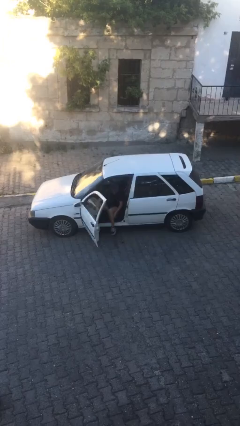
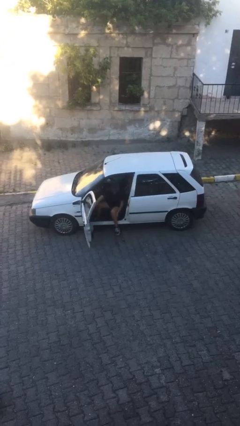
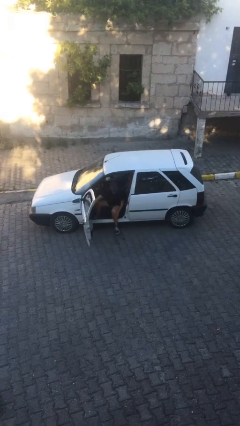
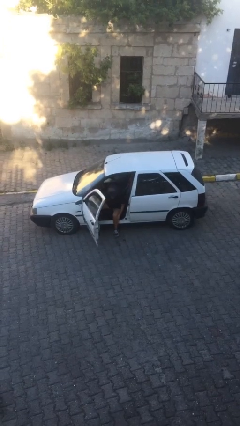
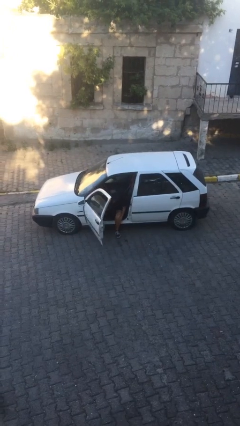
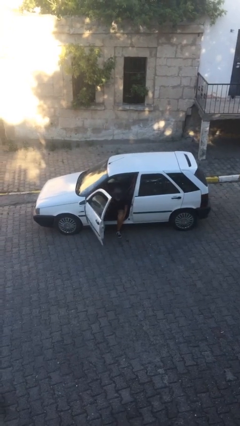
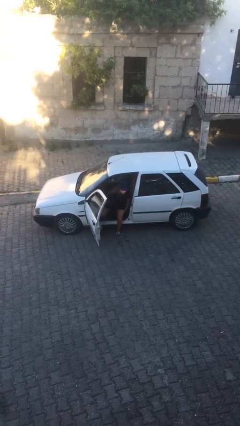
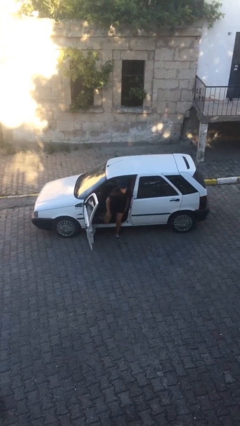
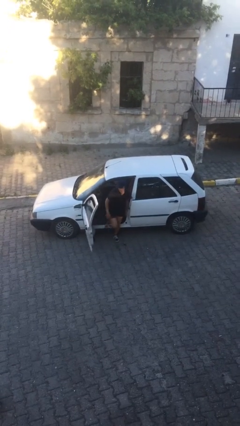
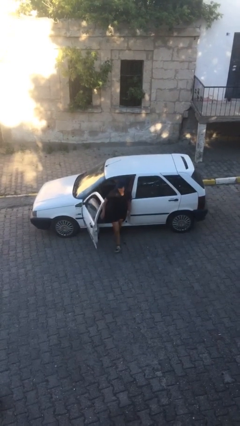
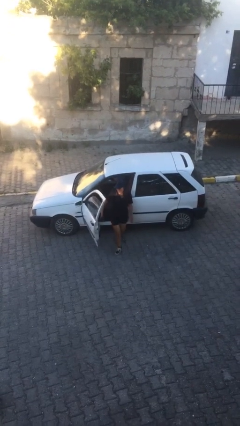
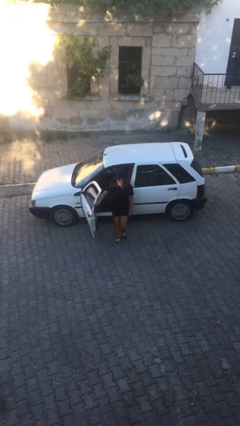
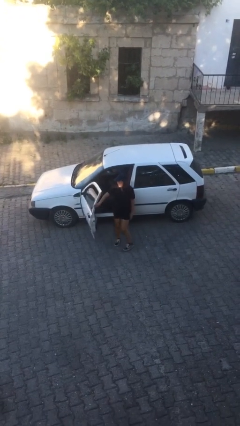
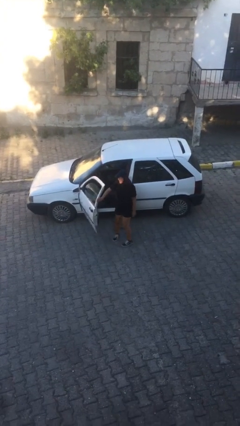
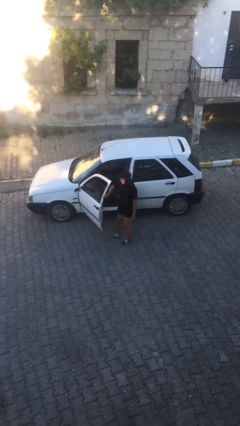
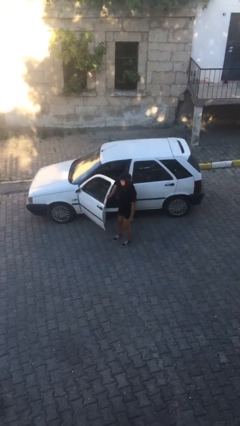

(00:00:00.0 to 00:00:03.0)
person exits car

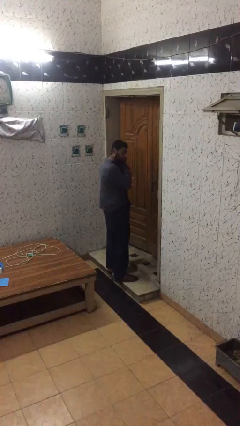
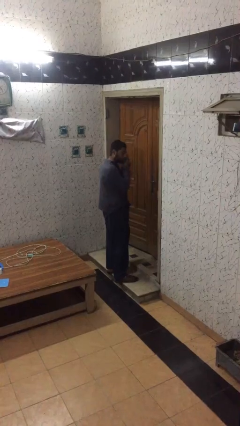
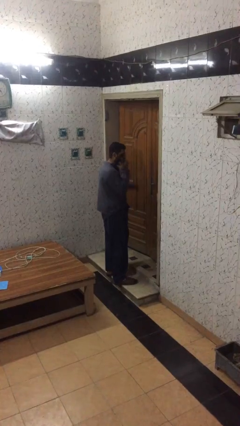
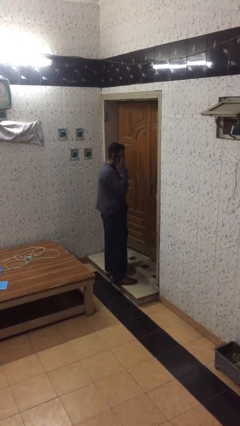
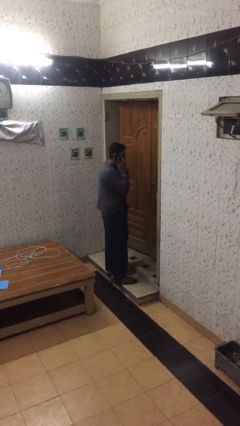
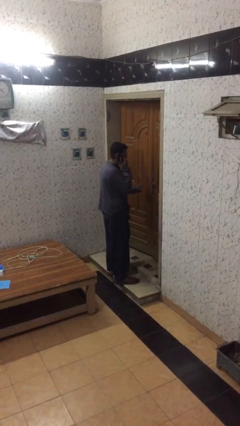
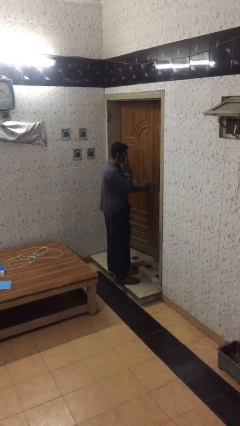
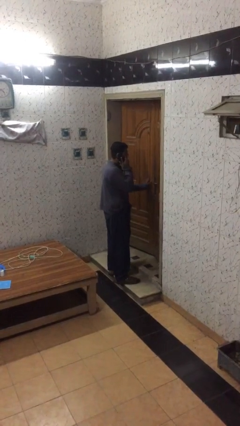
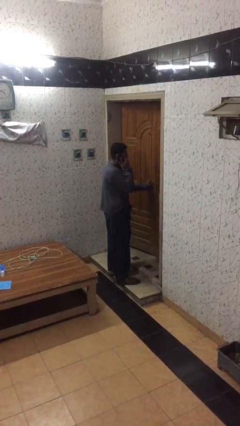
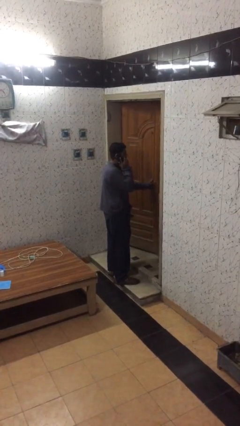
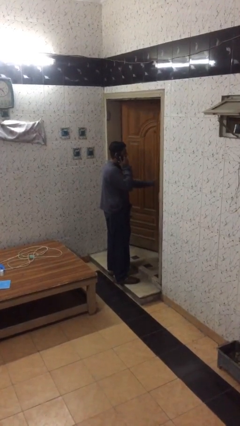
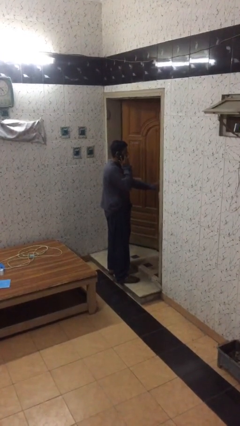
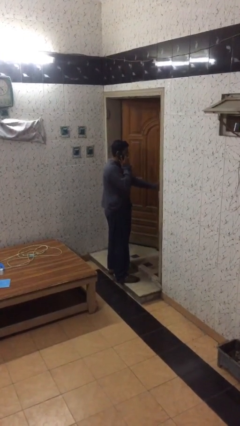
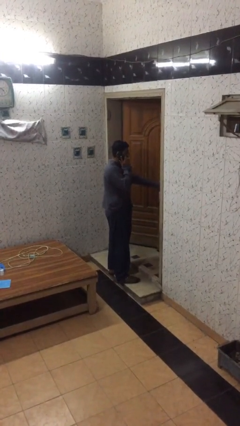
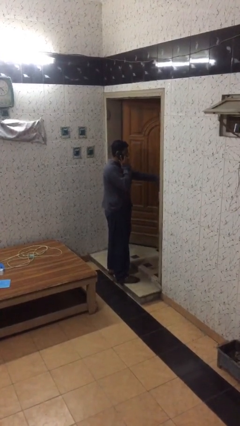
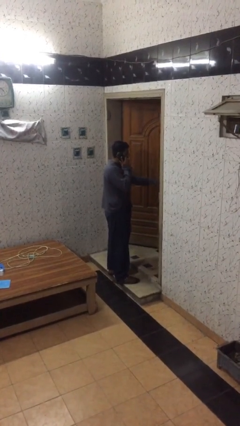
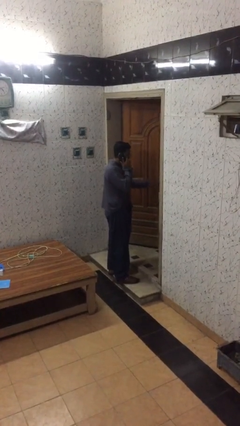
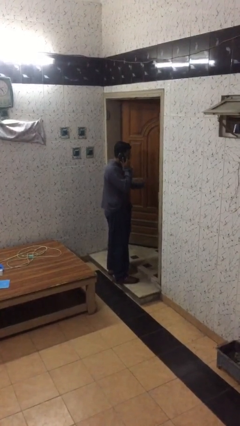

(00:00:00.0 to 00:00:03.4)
person opens facility door

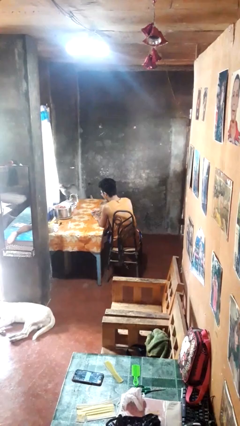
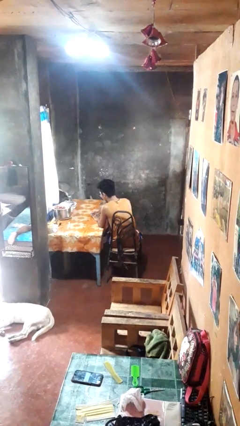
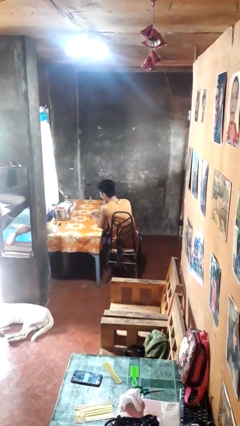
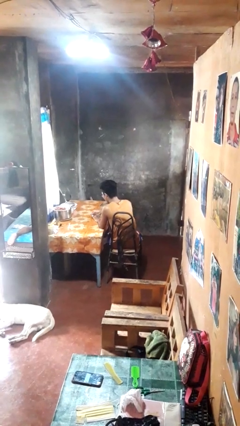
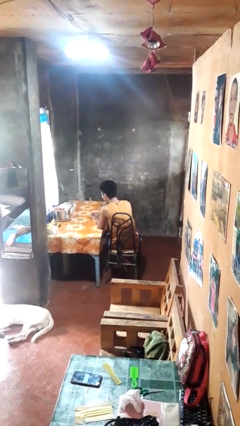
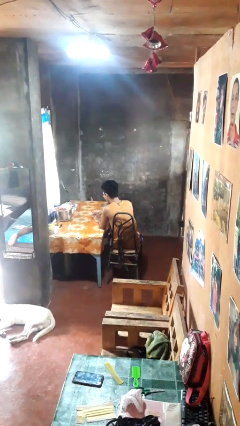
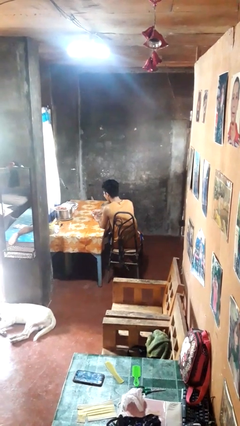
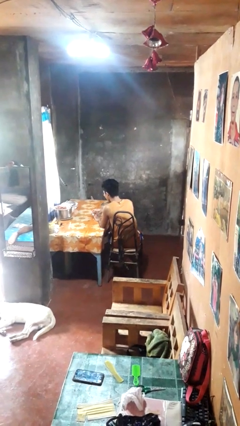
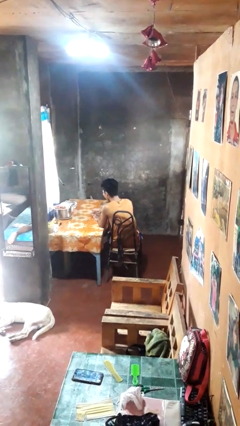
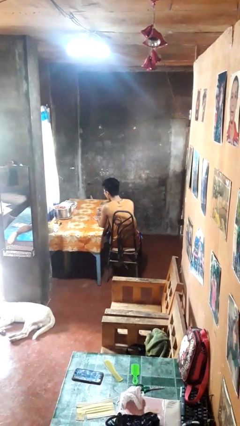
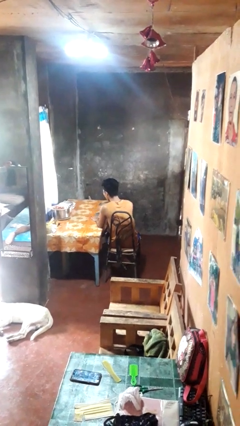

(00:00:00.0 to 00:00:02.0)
person clips fingernails

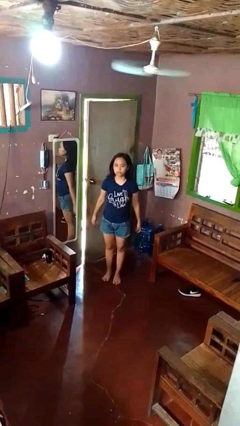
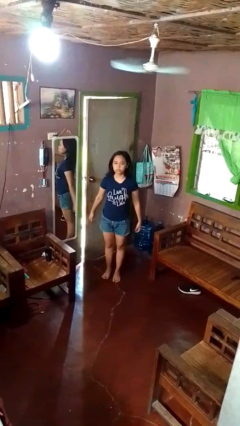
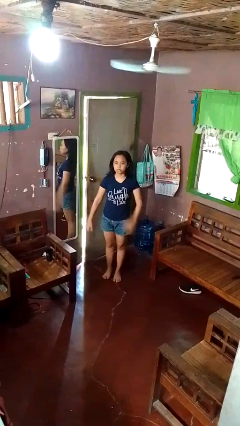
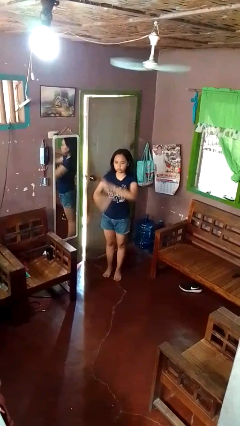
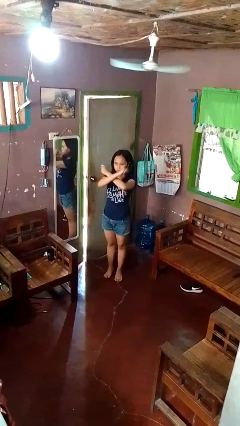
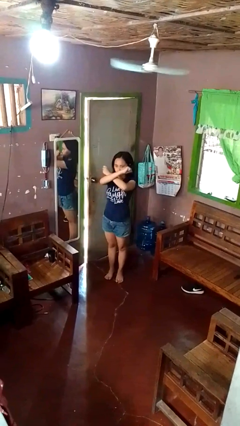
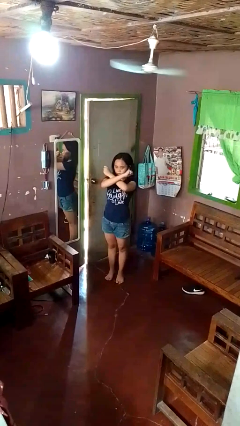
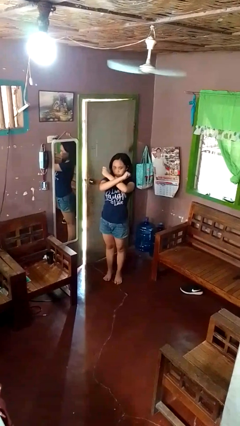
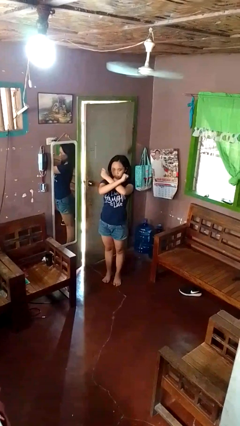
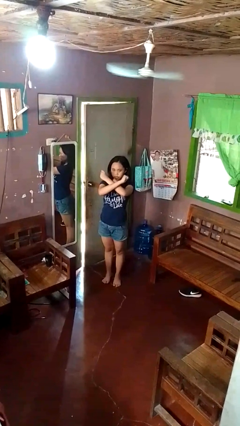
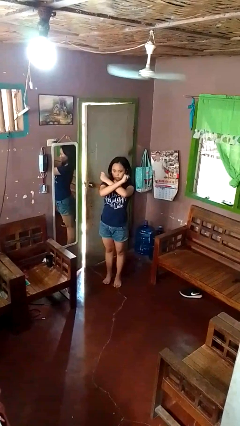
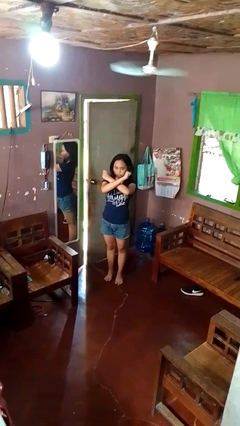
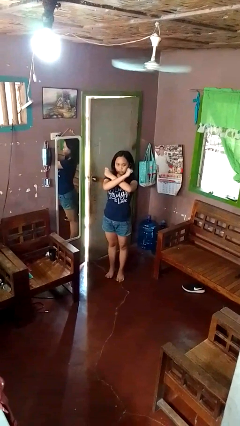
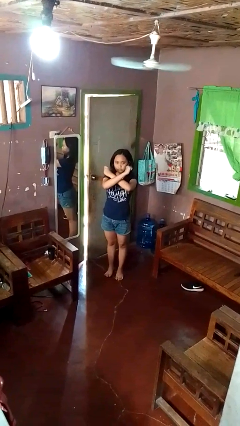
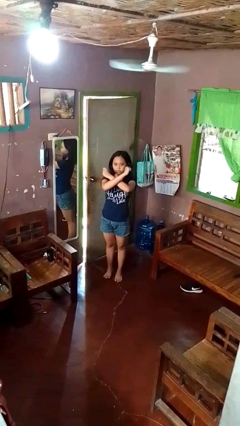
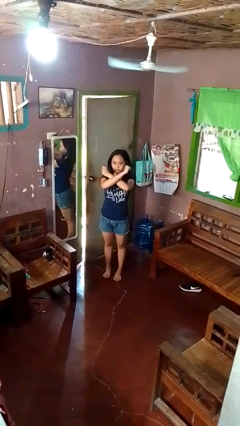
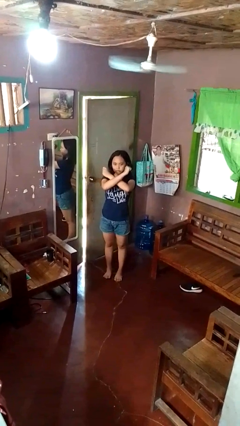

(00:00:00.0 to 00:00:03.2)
person gestures arms x

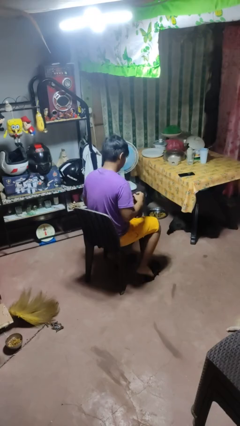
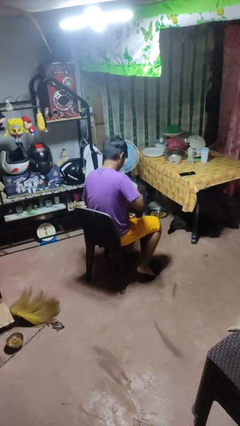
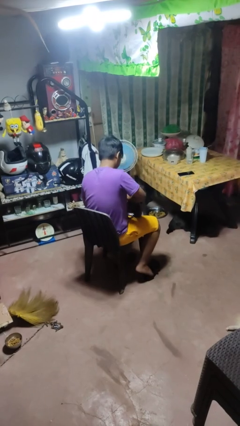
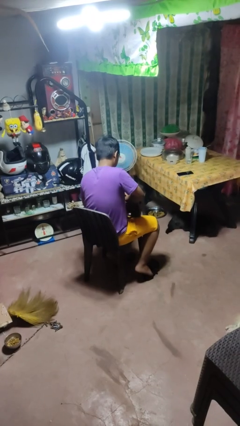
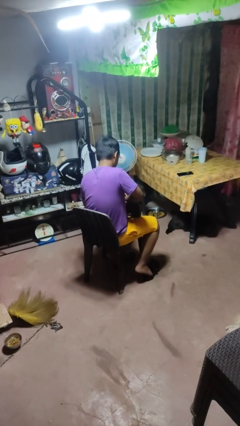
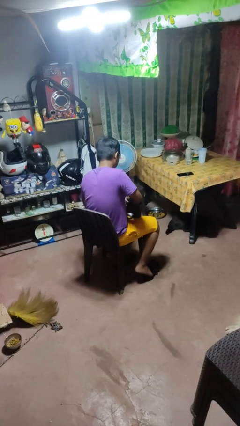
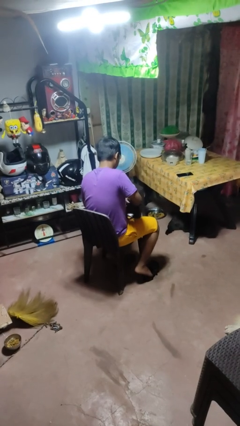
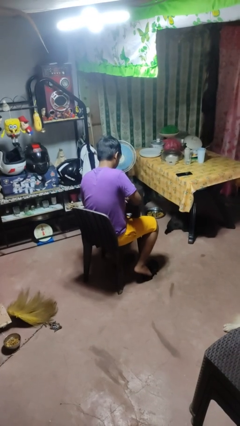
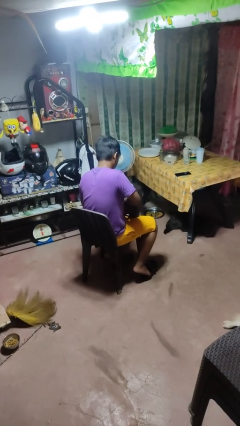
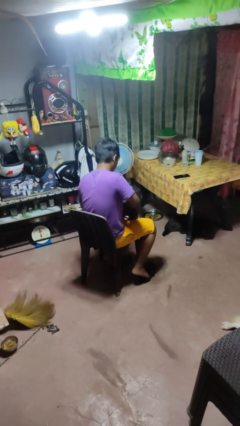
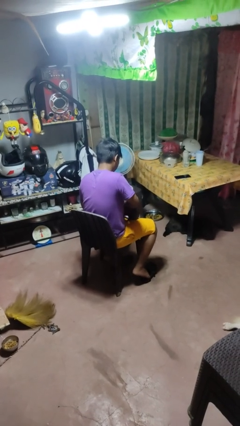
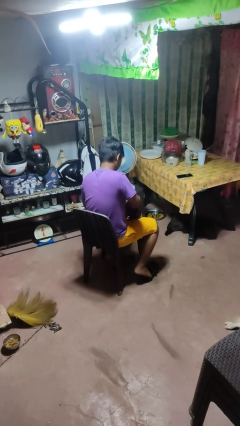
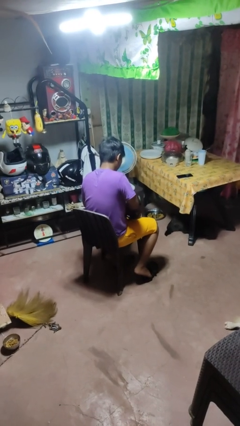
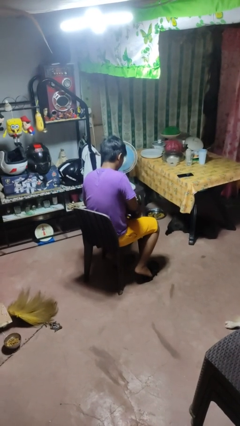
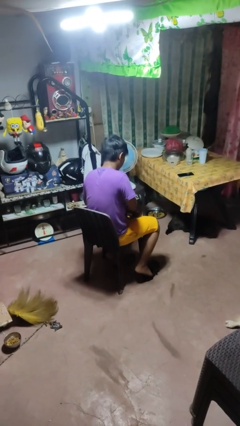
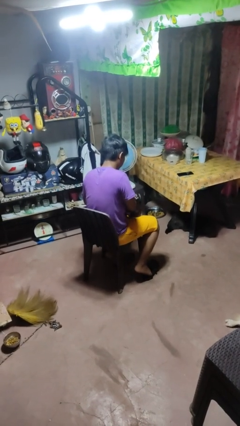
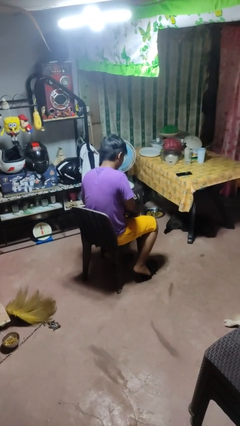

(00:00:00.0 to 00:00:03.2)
person searches in purse

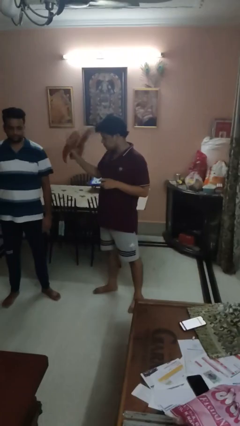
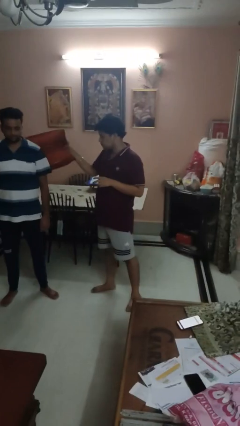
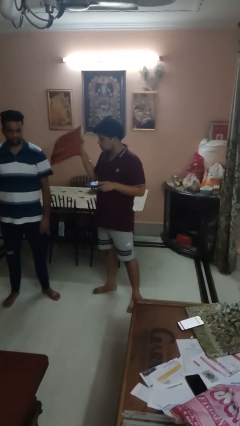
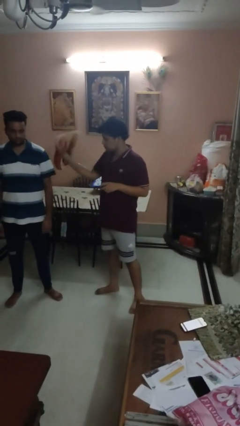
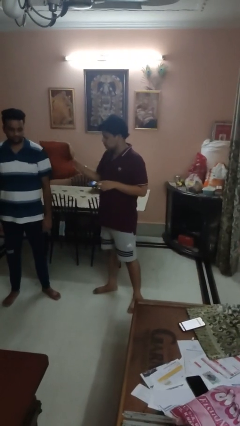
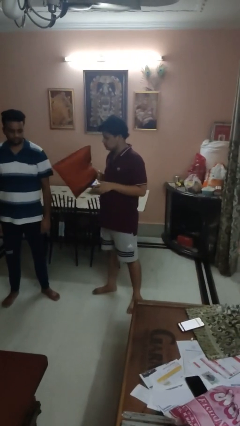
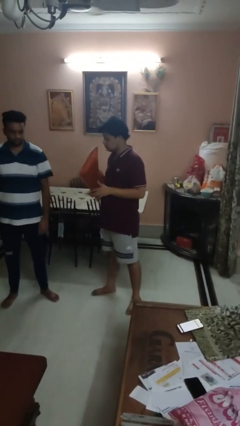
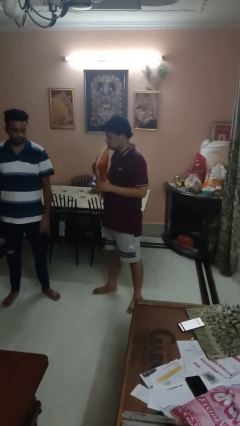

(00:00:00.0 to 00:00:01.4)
person hits person with pillow

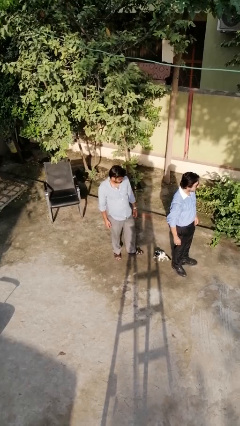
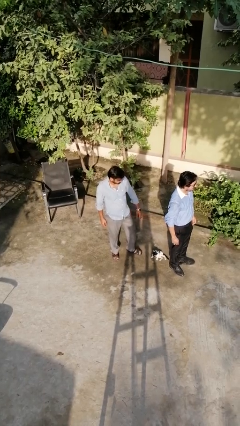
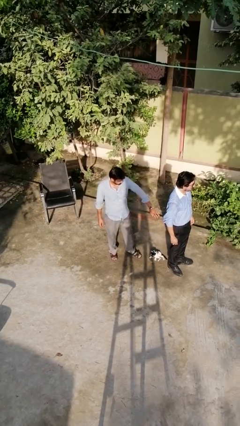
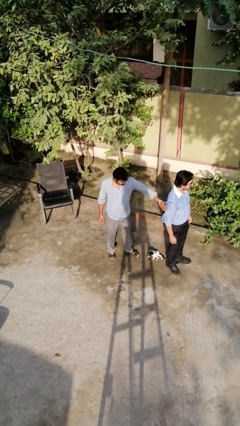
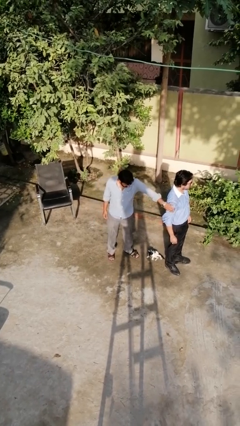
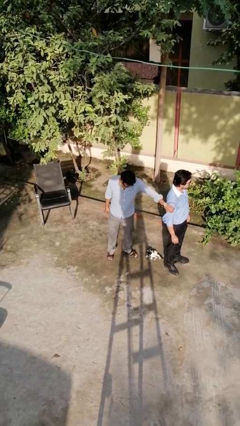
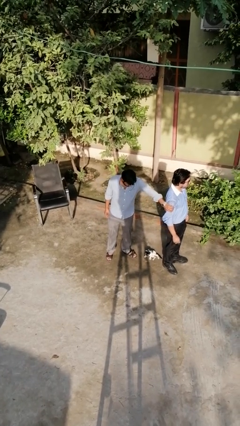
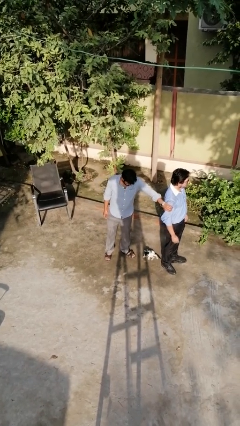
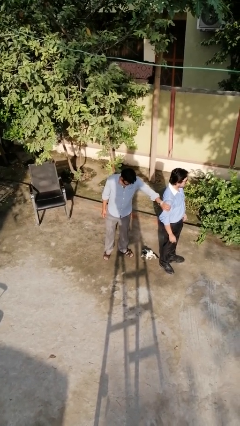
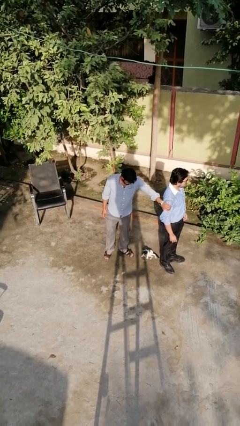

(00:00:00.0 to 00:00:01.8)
person grabs person by bicep
